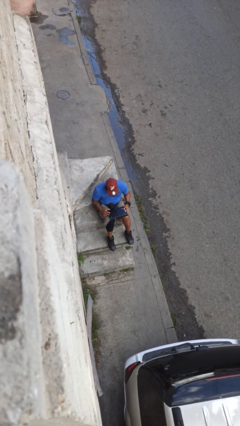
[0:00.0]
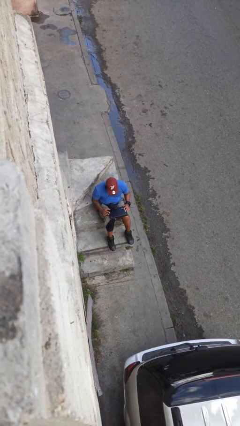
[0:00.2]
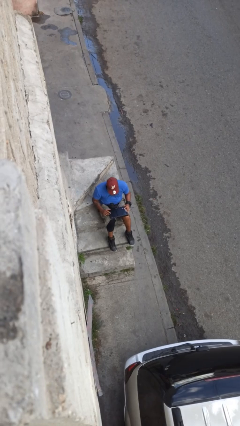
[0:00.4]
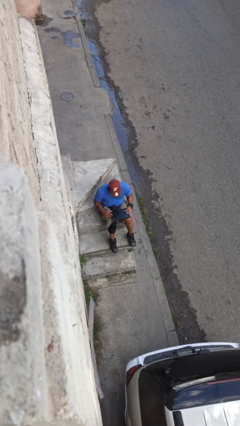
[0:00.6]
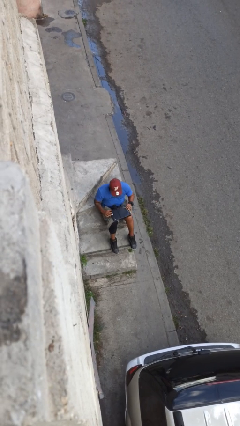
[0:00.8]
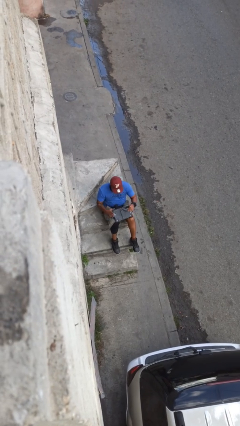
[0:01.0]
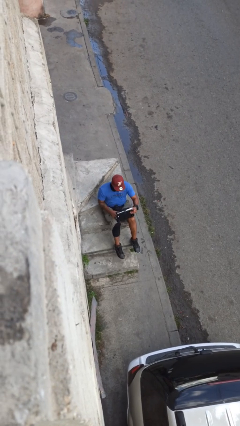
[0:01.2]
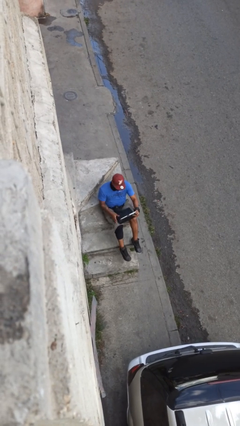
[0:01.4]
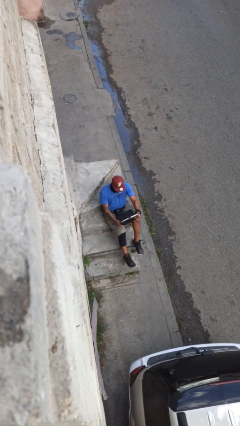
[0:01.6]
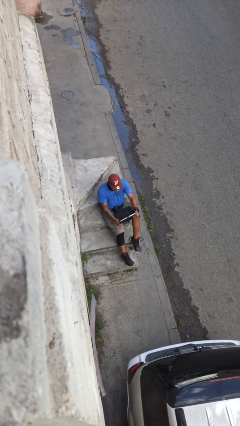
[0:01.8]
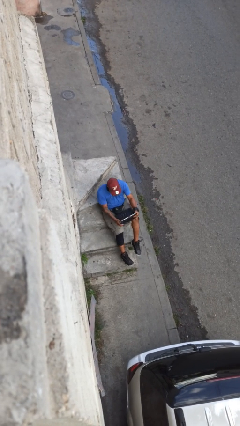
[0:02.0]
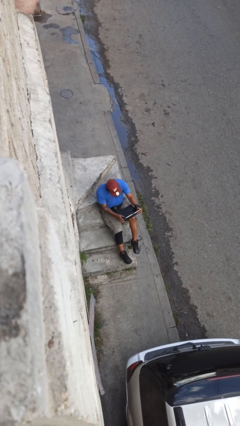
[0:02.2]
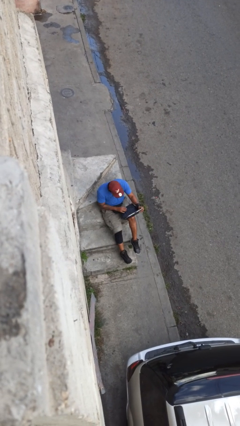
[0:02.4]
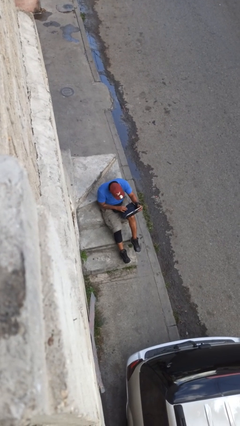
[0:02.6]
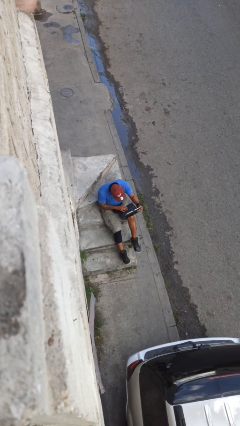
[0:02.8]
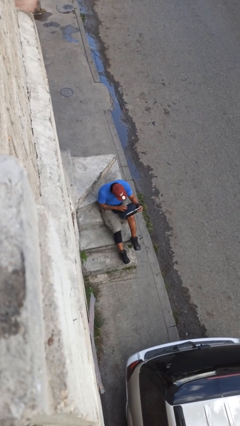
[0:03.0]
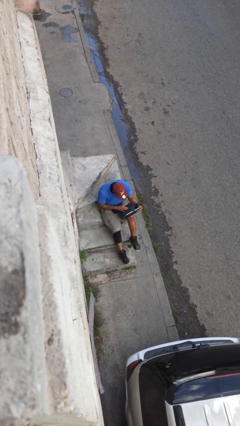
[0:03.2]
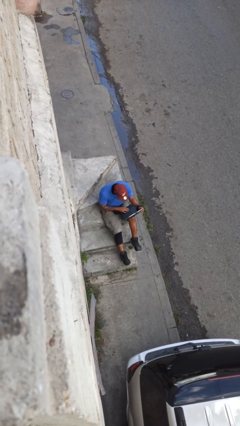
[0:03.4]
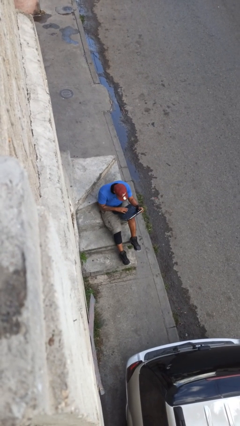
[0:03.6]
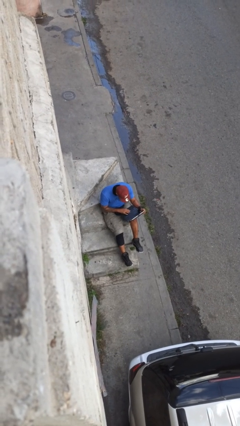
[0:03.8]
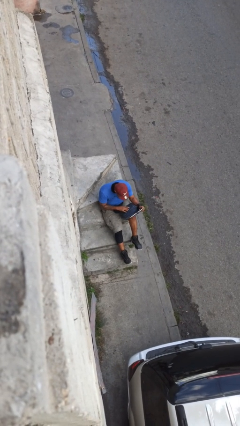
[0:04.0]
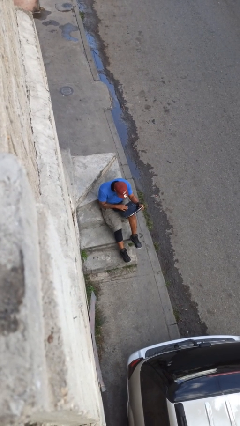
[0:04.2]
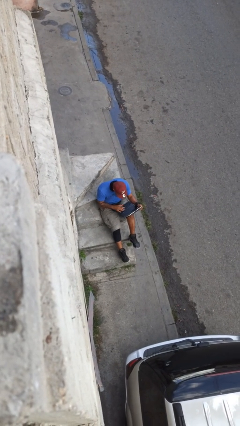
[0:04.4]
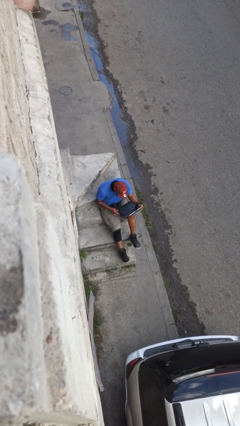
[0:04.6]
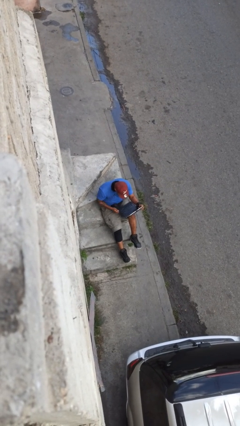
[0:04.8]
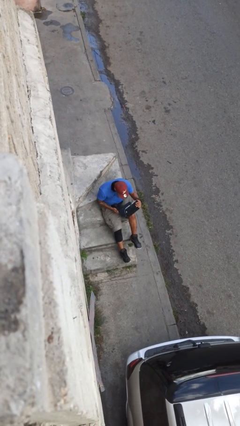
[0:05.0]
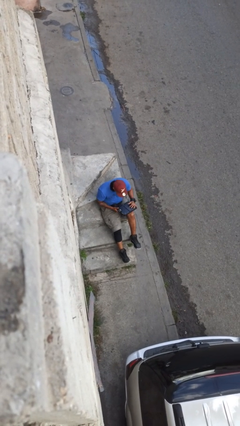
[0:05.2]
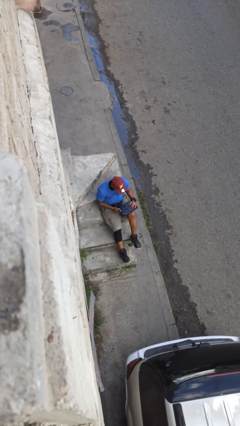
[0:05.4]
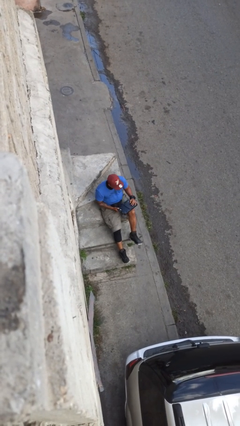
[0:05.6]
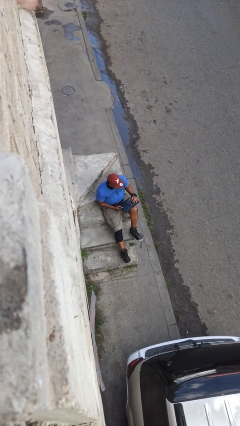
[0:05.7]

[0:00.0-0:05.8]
person interacts with laptop

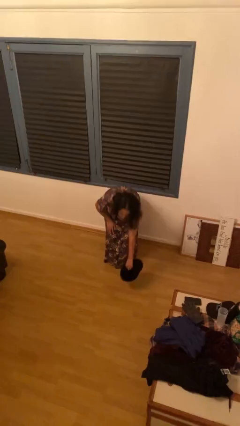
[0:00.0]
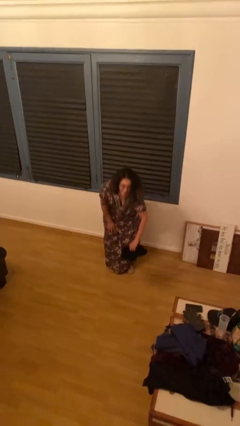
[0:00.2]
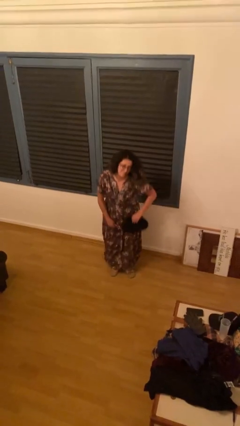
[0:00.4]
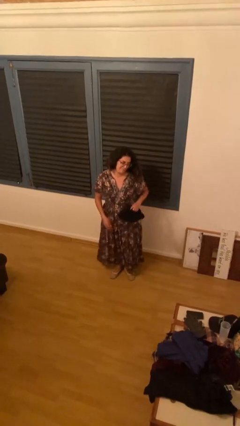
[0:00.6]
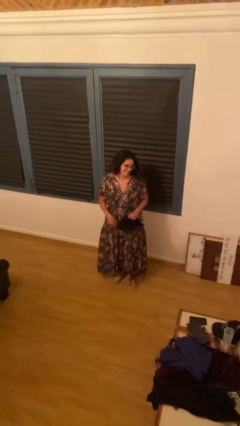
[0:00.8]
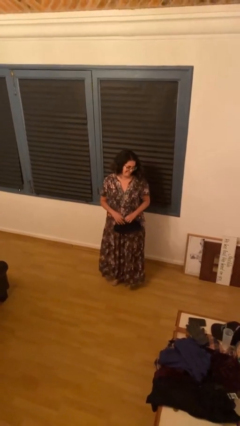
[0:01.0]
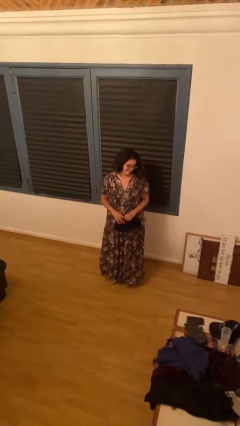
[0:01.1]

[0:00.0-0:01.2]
person picks up object from floor

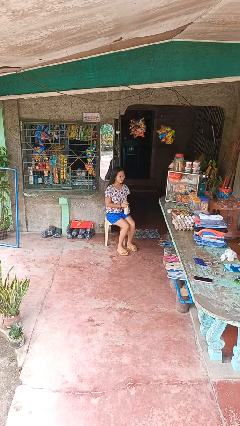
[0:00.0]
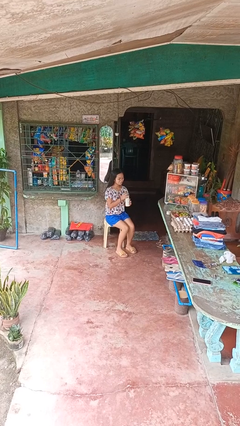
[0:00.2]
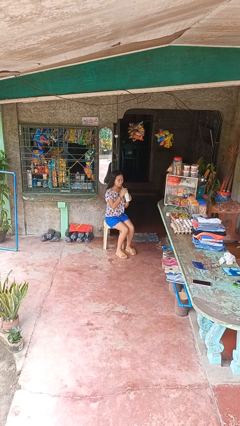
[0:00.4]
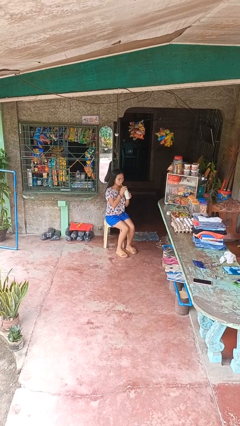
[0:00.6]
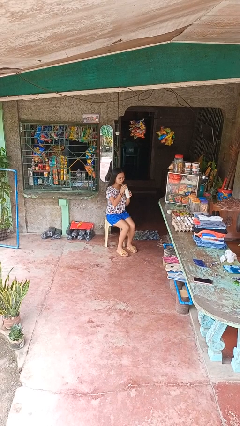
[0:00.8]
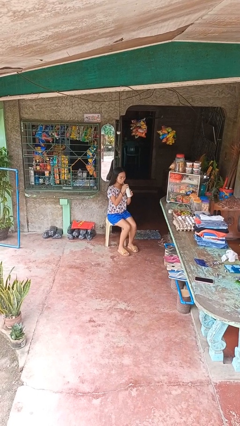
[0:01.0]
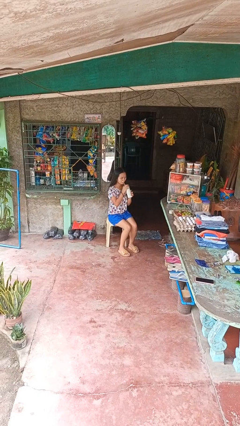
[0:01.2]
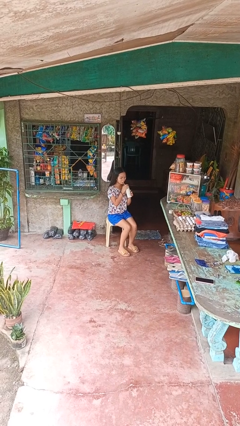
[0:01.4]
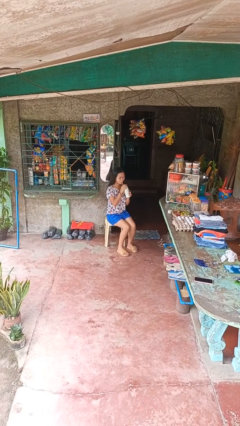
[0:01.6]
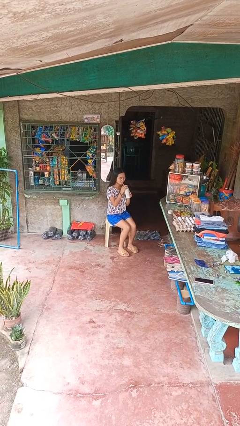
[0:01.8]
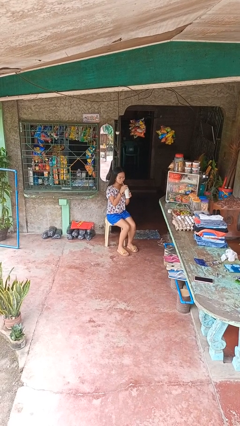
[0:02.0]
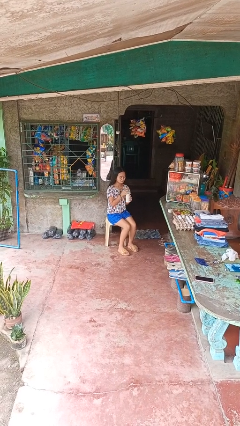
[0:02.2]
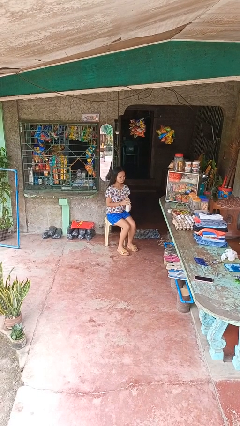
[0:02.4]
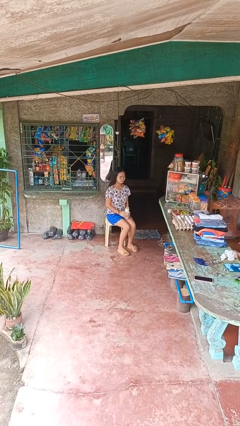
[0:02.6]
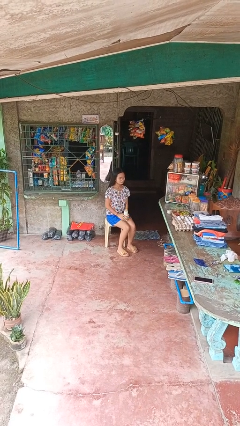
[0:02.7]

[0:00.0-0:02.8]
person drinks from straw

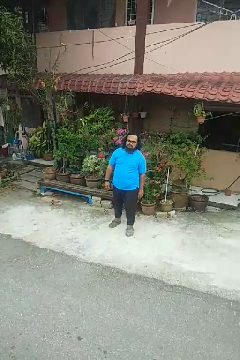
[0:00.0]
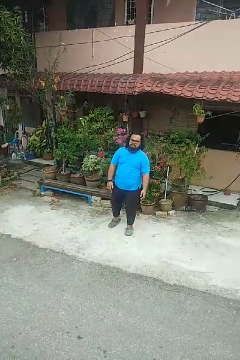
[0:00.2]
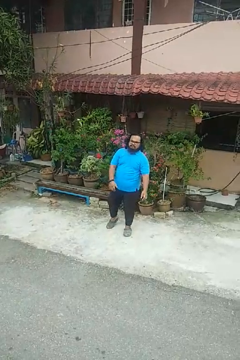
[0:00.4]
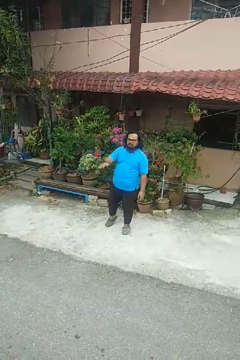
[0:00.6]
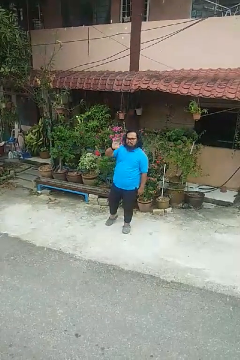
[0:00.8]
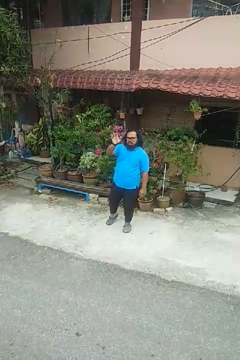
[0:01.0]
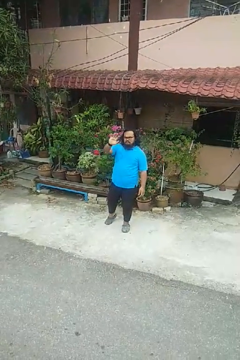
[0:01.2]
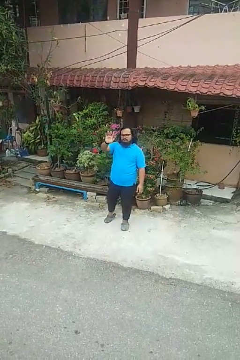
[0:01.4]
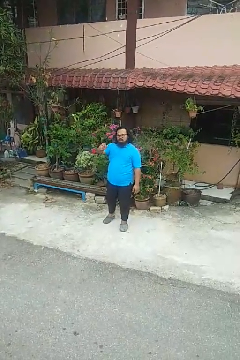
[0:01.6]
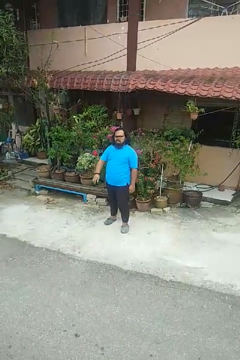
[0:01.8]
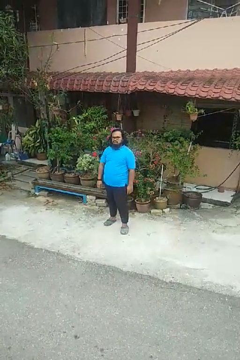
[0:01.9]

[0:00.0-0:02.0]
person waves at person

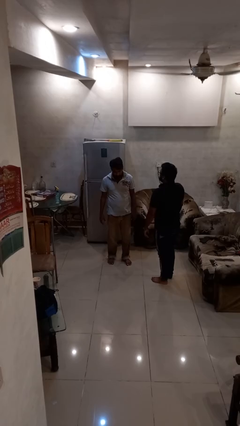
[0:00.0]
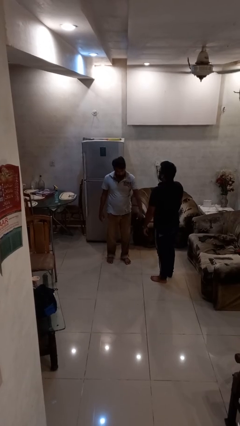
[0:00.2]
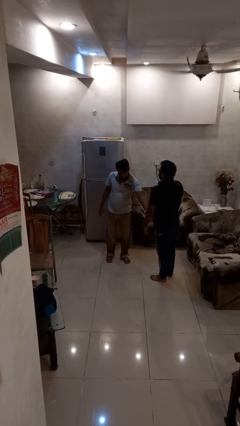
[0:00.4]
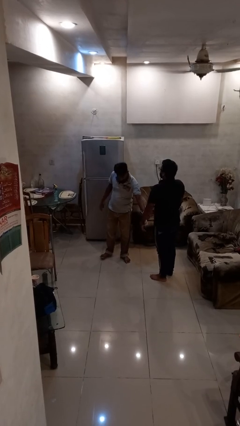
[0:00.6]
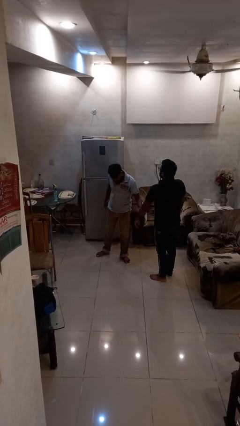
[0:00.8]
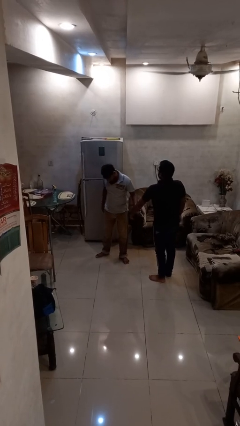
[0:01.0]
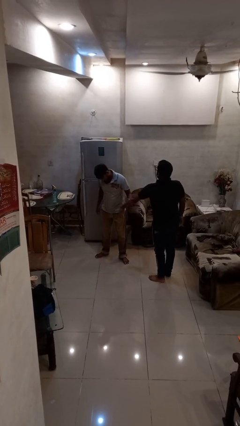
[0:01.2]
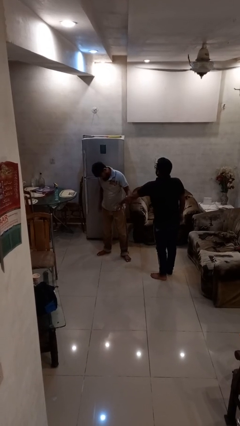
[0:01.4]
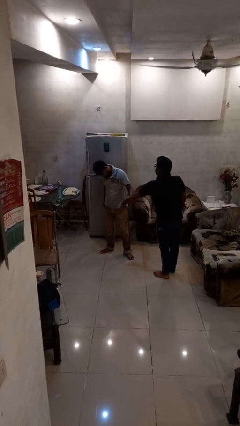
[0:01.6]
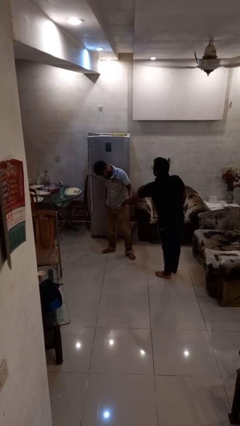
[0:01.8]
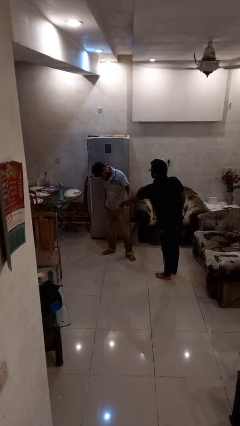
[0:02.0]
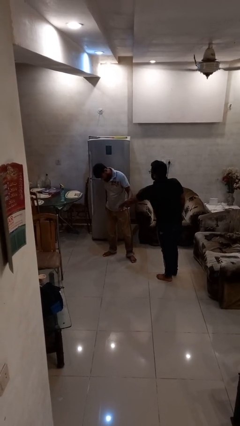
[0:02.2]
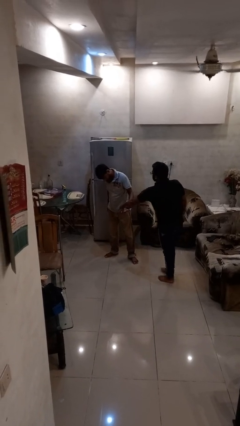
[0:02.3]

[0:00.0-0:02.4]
person grabs person by forearm

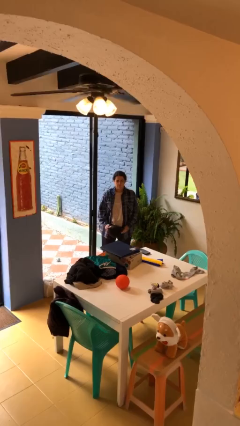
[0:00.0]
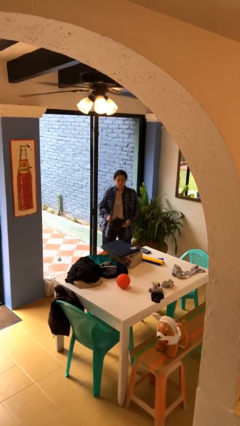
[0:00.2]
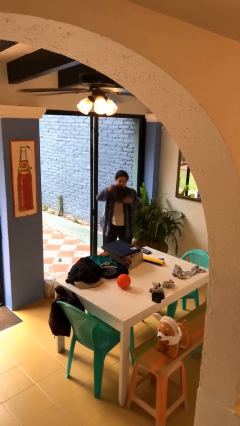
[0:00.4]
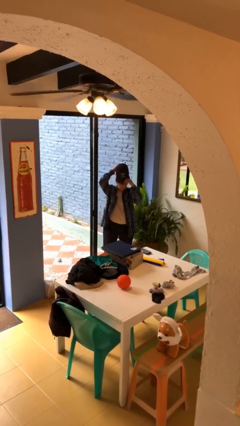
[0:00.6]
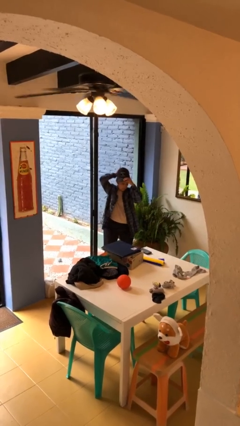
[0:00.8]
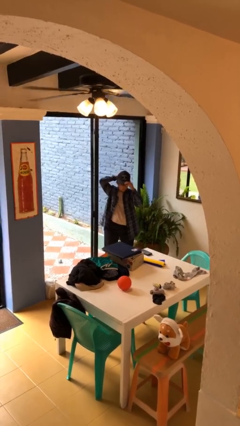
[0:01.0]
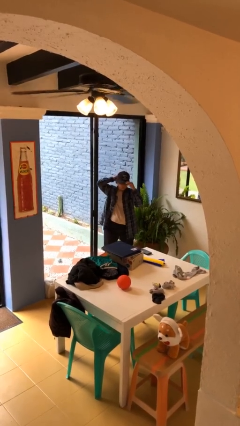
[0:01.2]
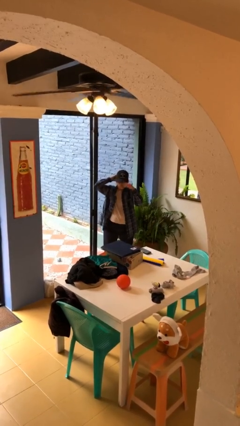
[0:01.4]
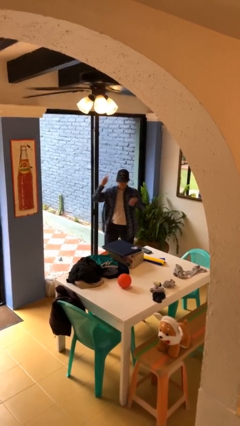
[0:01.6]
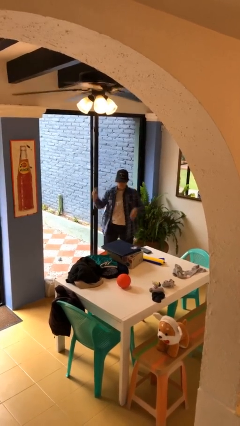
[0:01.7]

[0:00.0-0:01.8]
person puts on hat

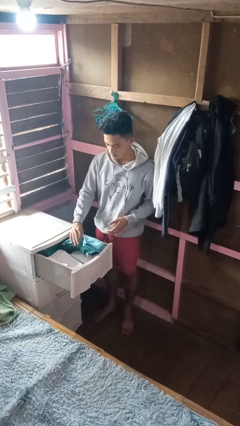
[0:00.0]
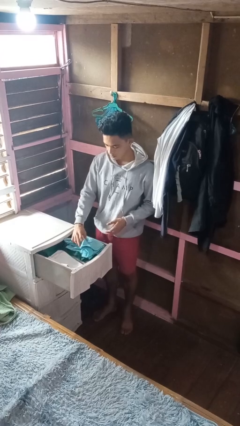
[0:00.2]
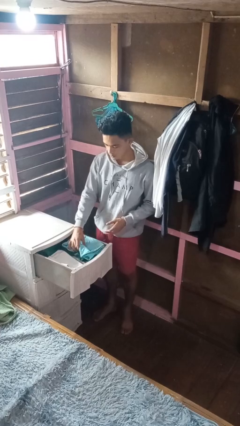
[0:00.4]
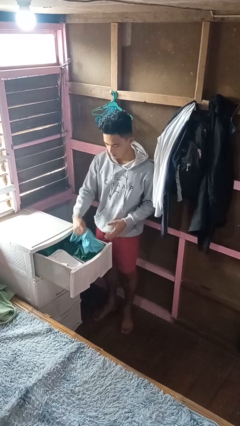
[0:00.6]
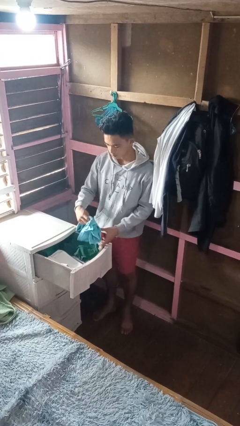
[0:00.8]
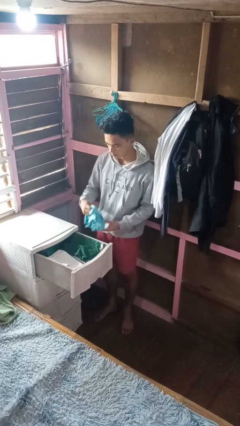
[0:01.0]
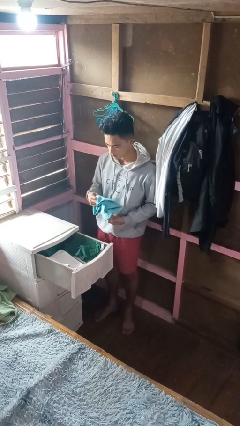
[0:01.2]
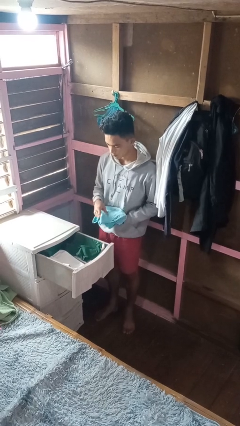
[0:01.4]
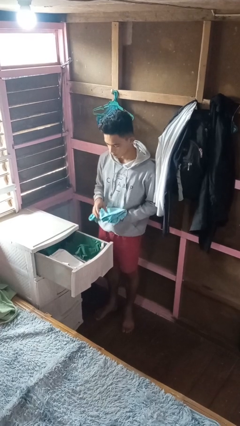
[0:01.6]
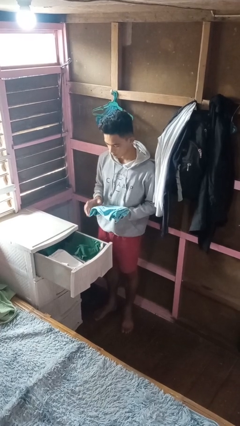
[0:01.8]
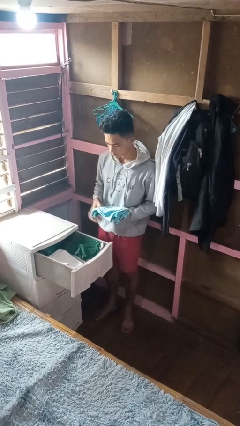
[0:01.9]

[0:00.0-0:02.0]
person takes clothes from dresser
